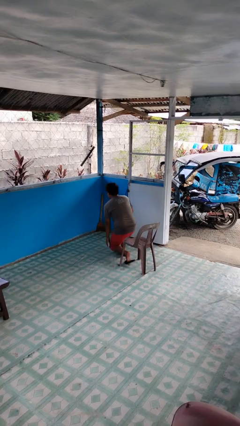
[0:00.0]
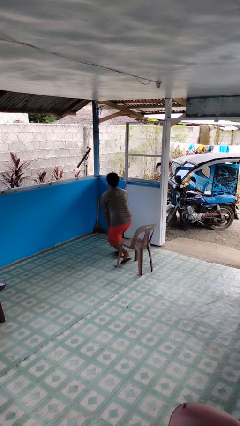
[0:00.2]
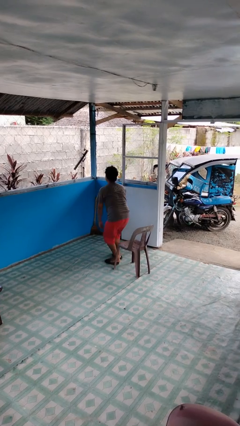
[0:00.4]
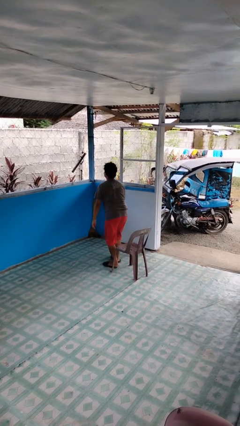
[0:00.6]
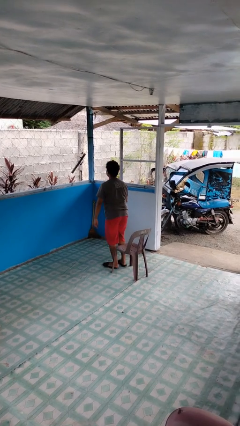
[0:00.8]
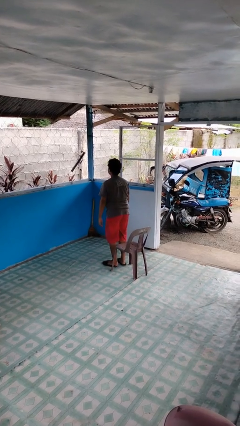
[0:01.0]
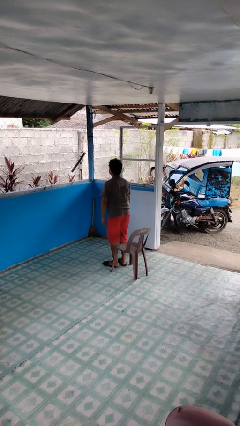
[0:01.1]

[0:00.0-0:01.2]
person stands up from floor

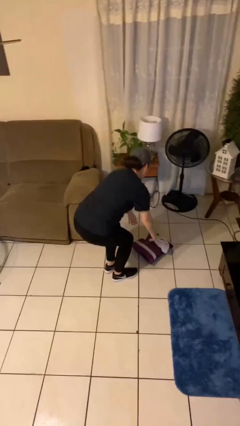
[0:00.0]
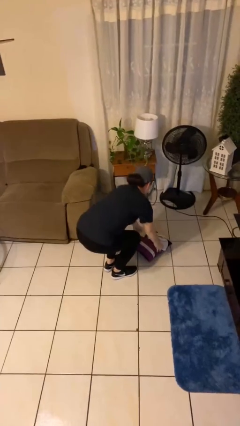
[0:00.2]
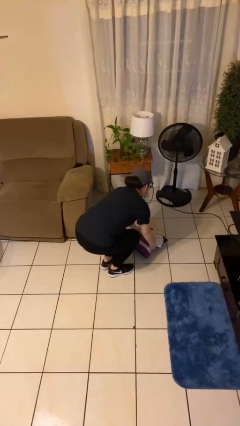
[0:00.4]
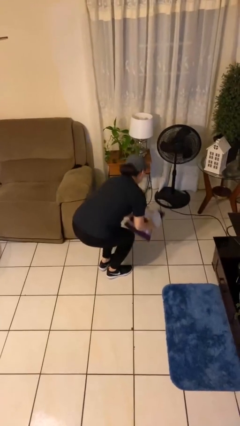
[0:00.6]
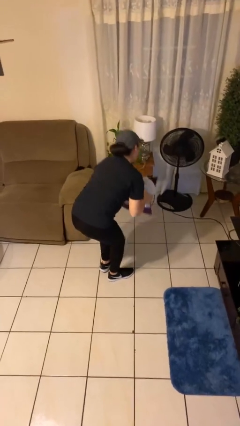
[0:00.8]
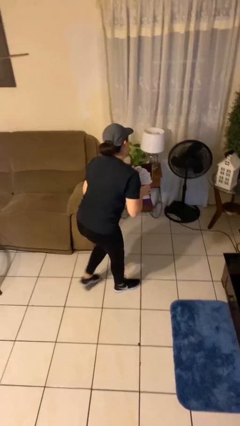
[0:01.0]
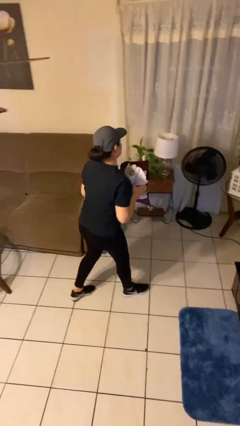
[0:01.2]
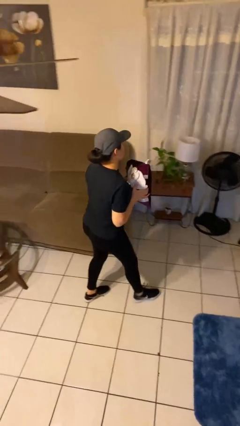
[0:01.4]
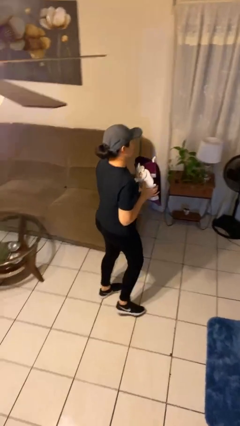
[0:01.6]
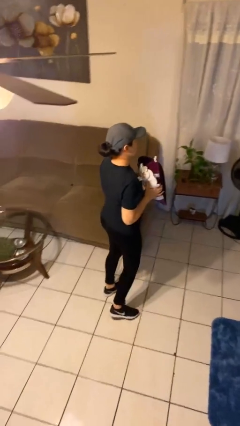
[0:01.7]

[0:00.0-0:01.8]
person picks up object from floor

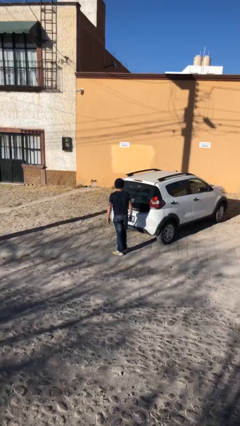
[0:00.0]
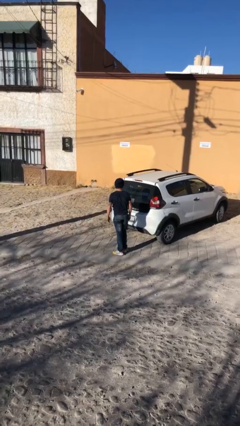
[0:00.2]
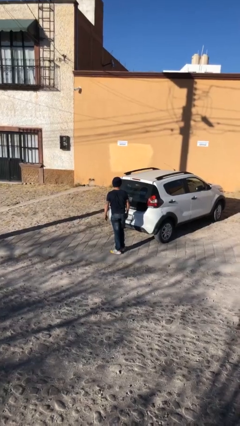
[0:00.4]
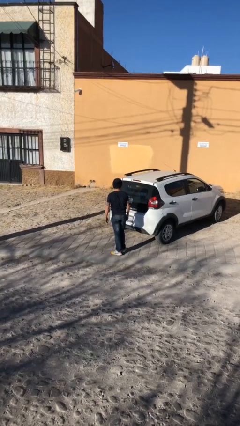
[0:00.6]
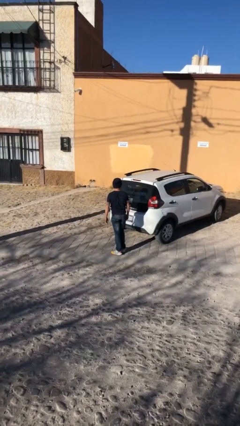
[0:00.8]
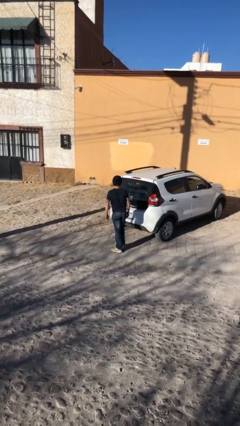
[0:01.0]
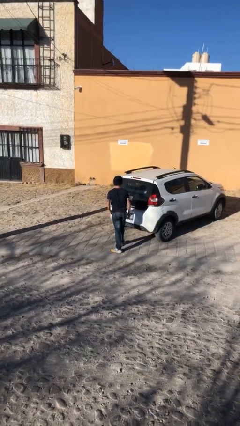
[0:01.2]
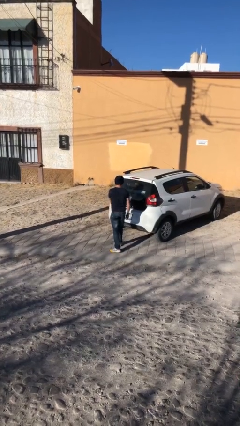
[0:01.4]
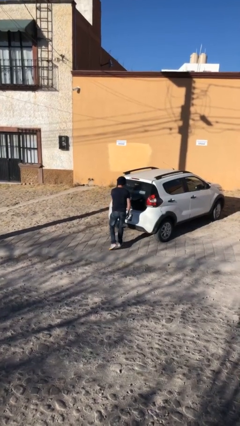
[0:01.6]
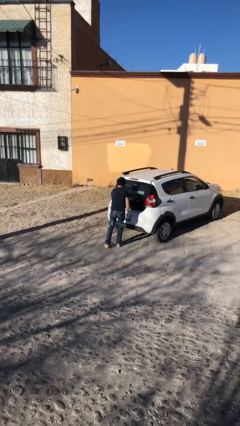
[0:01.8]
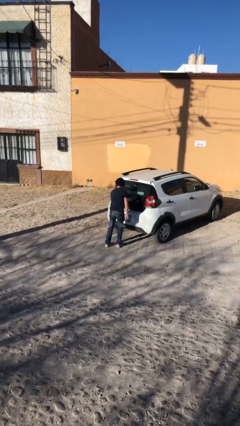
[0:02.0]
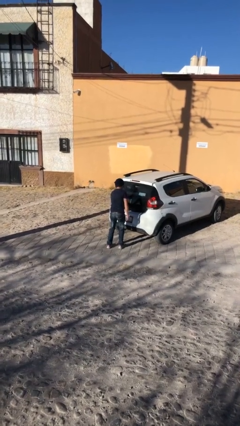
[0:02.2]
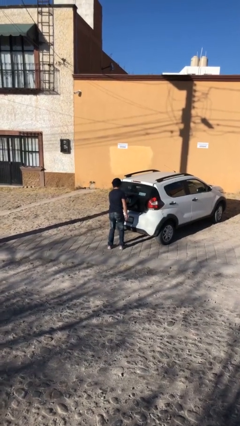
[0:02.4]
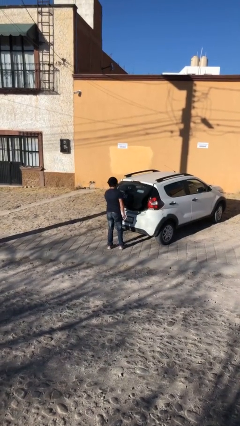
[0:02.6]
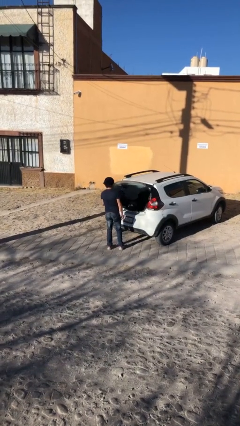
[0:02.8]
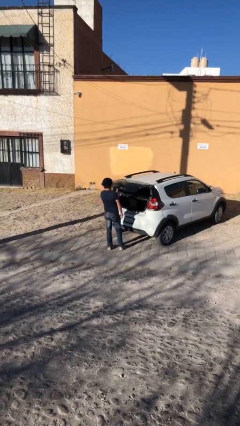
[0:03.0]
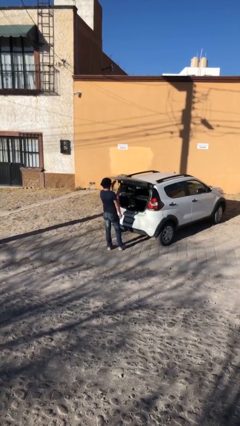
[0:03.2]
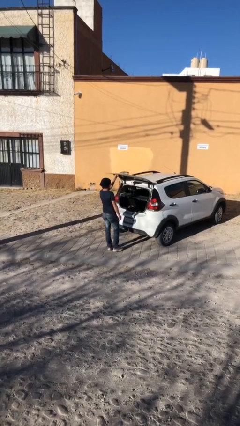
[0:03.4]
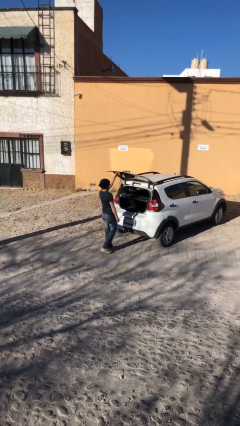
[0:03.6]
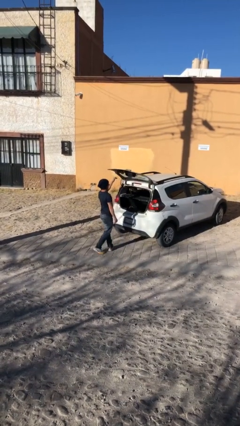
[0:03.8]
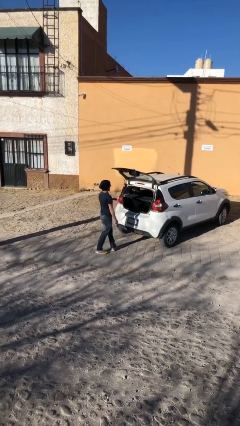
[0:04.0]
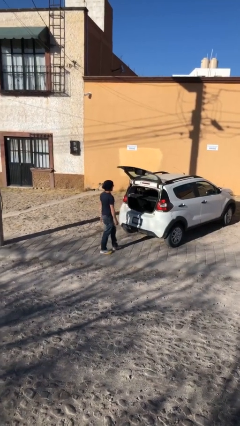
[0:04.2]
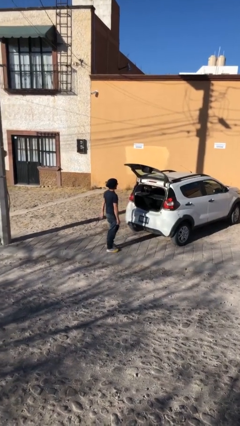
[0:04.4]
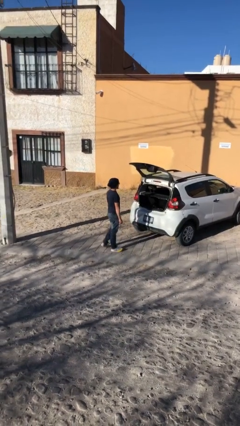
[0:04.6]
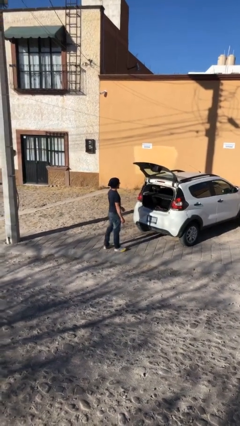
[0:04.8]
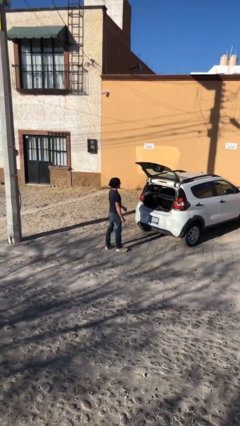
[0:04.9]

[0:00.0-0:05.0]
person opens car trunk

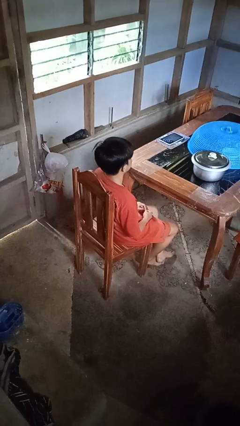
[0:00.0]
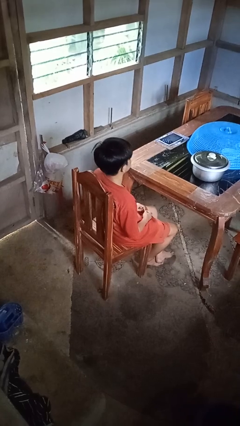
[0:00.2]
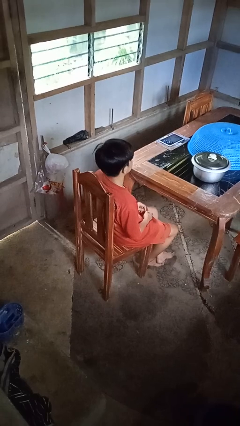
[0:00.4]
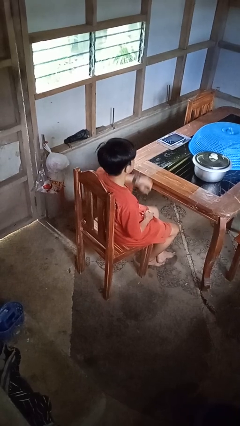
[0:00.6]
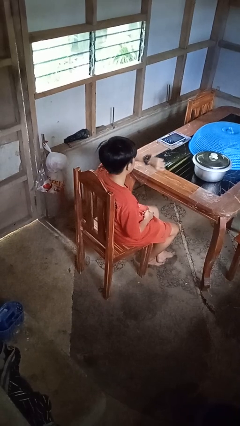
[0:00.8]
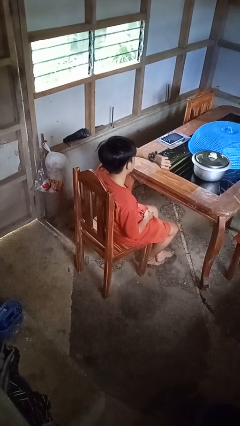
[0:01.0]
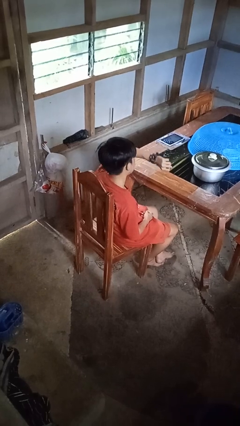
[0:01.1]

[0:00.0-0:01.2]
person looks at wristwatch

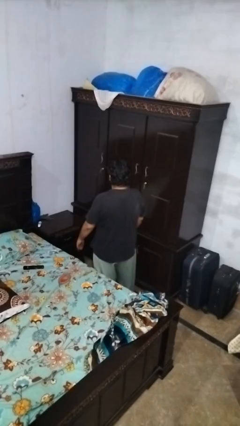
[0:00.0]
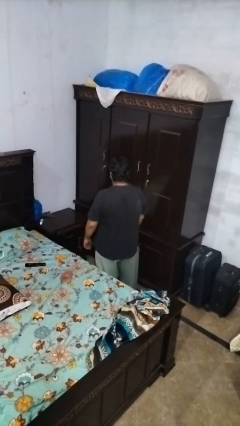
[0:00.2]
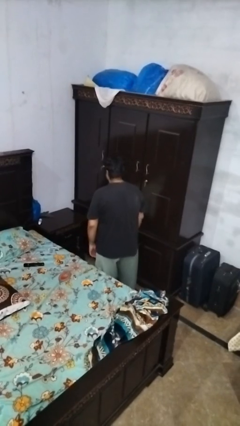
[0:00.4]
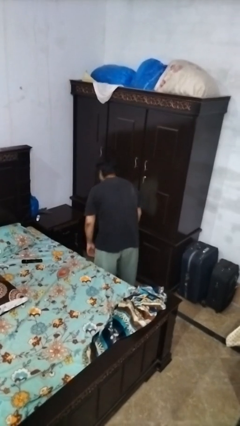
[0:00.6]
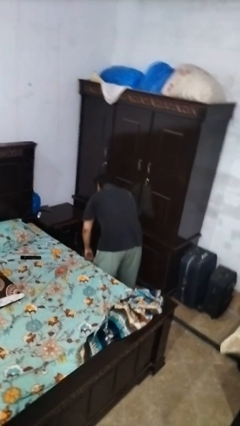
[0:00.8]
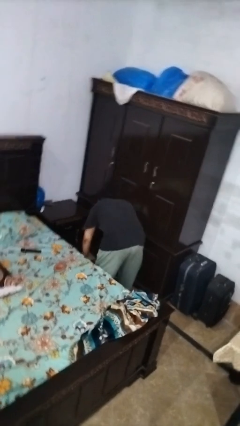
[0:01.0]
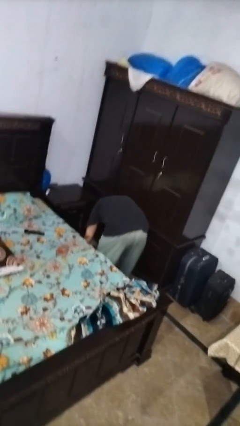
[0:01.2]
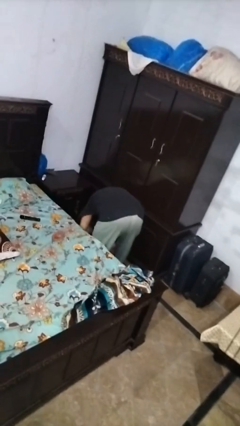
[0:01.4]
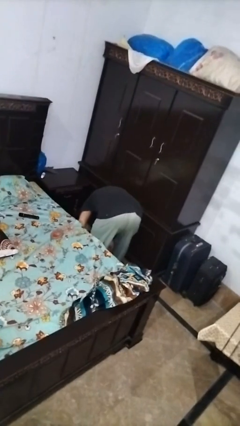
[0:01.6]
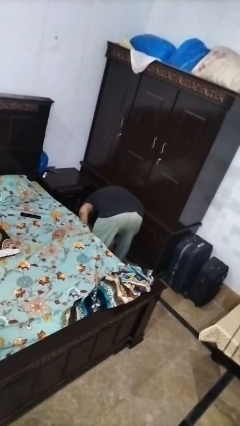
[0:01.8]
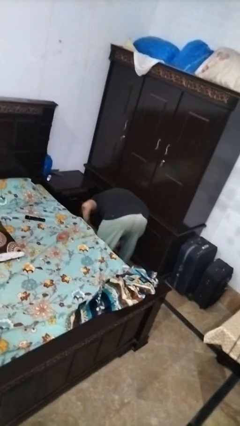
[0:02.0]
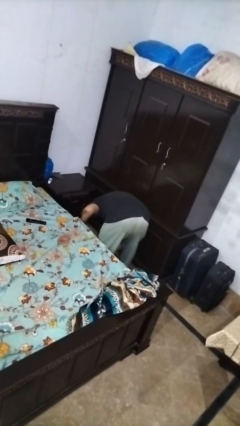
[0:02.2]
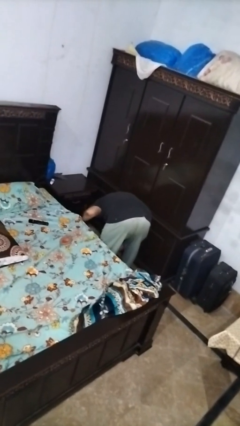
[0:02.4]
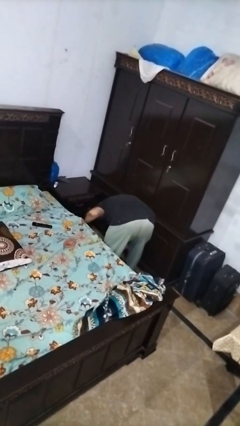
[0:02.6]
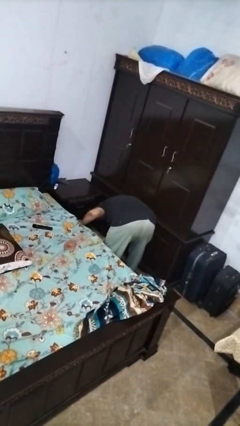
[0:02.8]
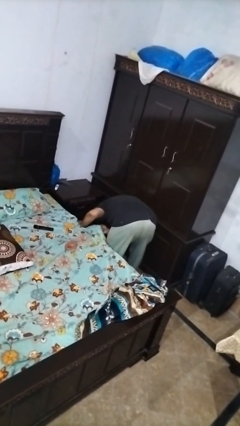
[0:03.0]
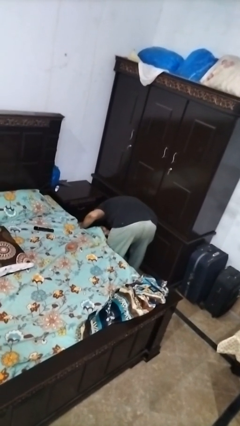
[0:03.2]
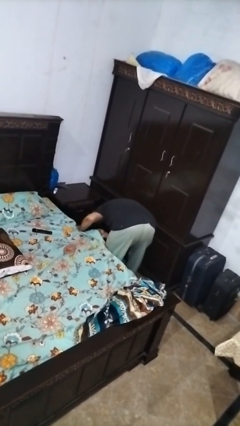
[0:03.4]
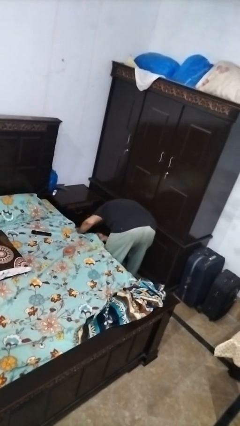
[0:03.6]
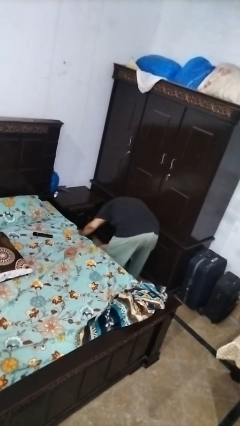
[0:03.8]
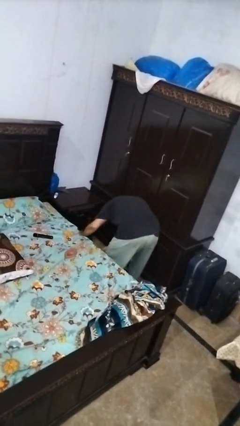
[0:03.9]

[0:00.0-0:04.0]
person searches under bed

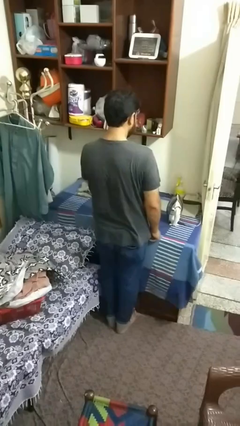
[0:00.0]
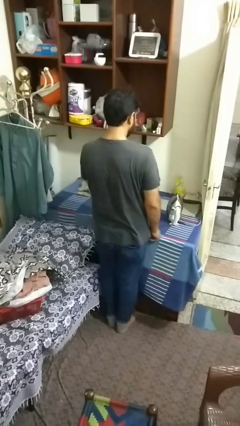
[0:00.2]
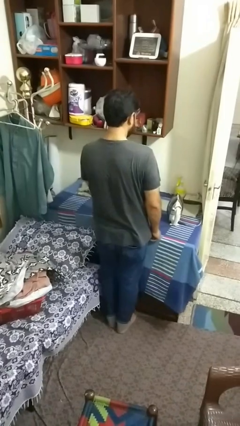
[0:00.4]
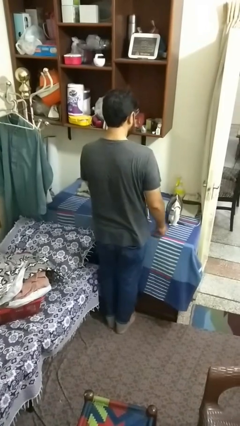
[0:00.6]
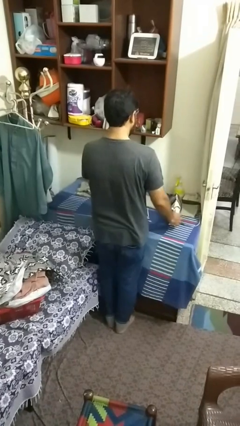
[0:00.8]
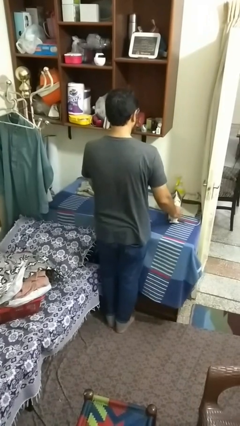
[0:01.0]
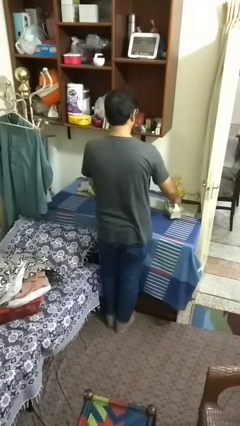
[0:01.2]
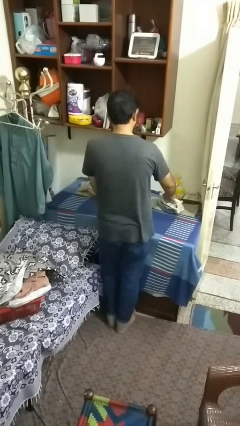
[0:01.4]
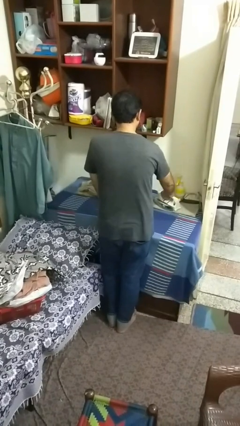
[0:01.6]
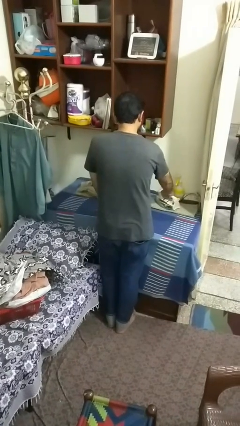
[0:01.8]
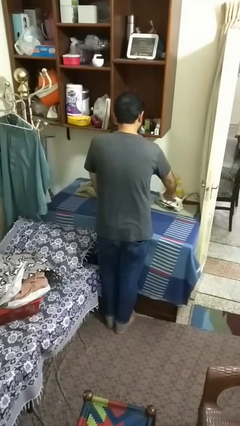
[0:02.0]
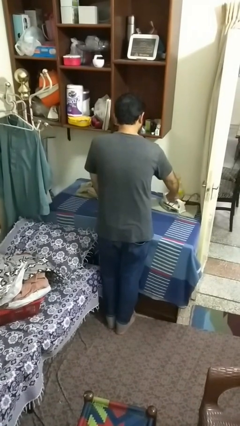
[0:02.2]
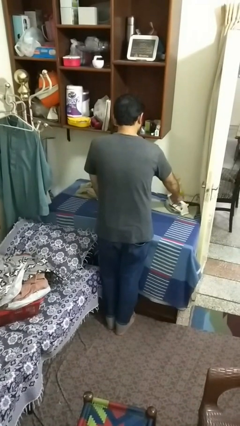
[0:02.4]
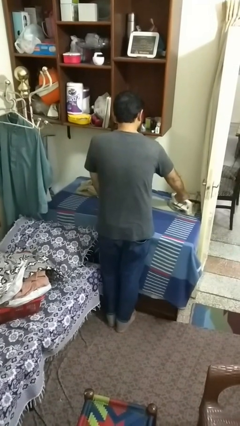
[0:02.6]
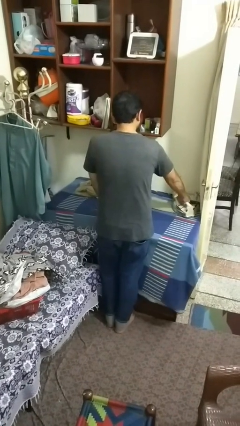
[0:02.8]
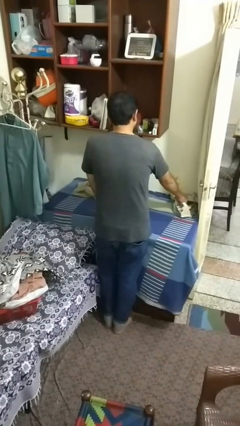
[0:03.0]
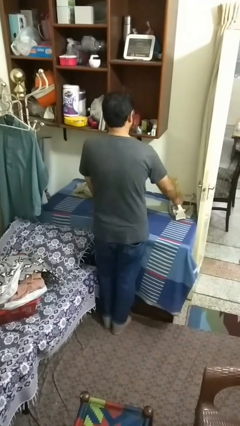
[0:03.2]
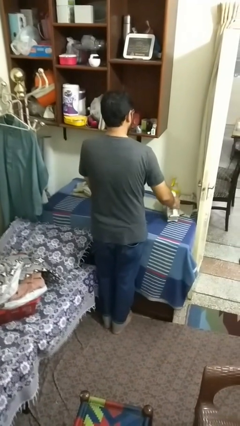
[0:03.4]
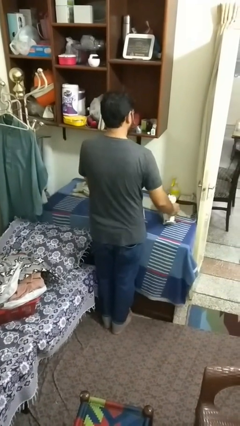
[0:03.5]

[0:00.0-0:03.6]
person irons clothes

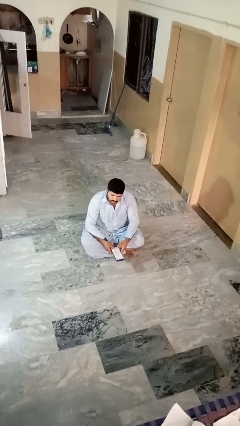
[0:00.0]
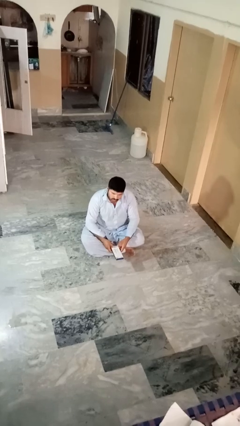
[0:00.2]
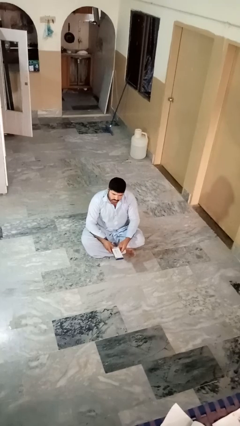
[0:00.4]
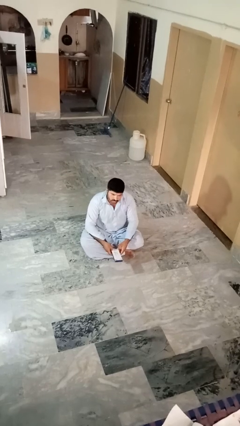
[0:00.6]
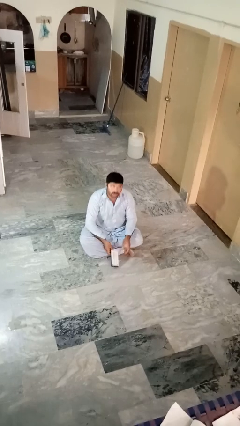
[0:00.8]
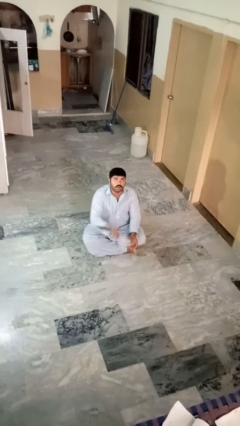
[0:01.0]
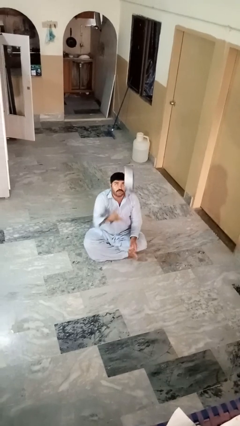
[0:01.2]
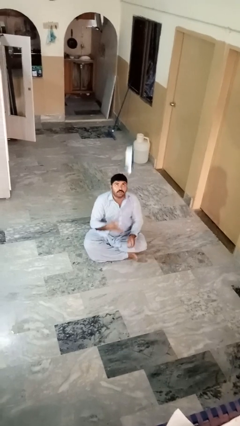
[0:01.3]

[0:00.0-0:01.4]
person drops object
